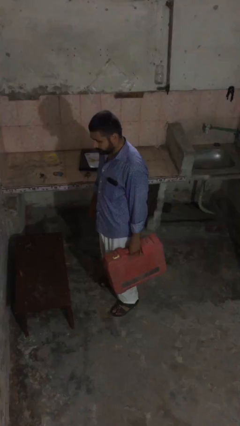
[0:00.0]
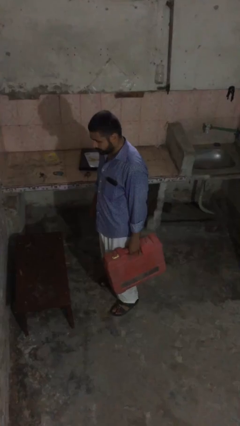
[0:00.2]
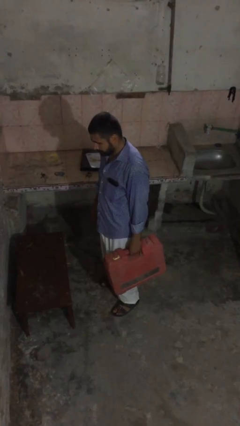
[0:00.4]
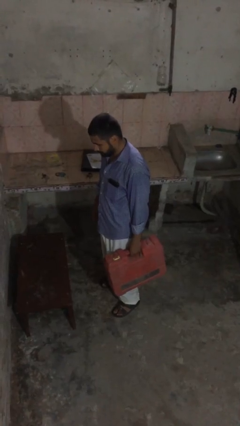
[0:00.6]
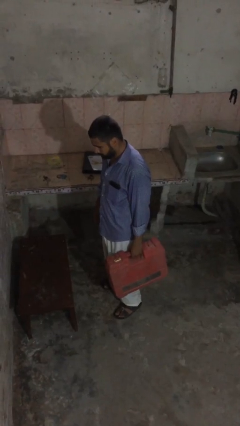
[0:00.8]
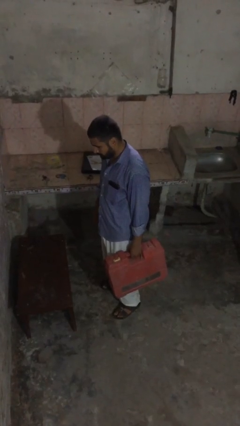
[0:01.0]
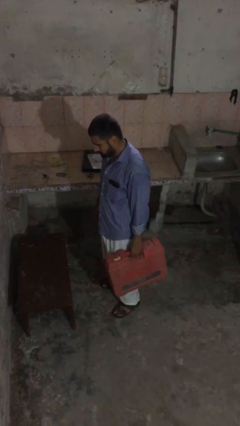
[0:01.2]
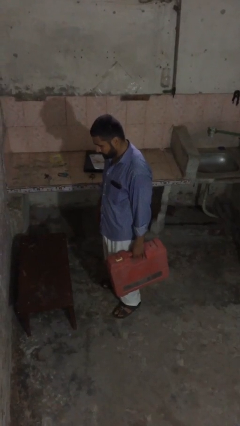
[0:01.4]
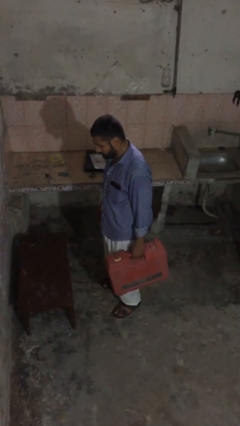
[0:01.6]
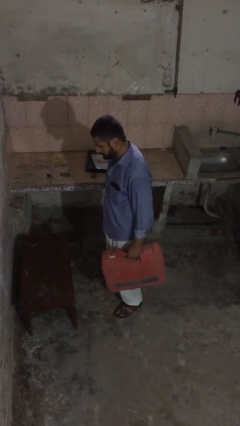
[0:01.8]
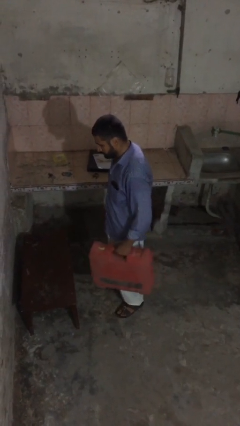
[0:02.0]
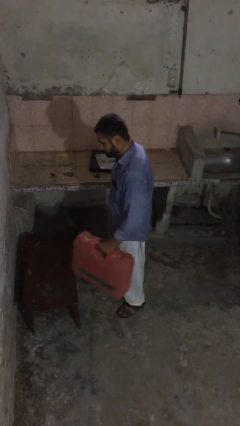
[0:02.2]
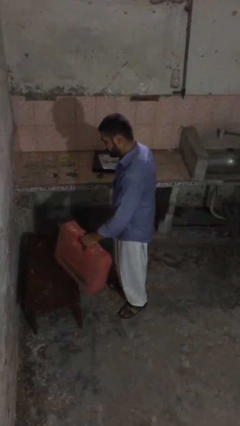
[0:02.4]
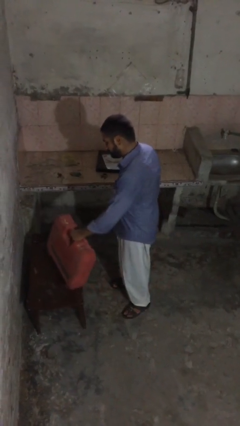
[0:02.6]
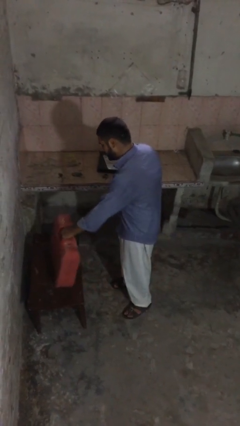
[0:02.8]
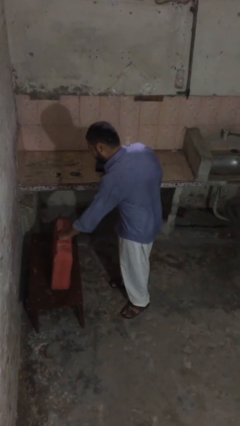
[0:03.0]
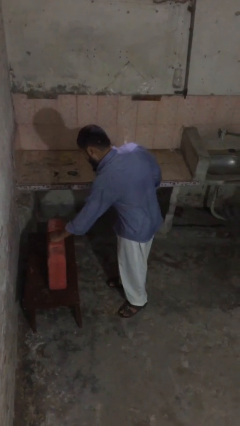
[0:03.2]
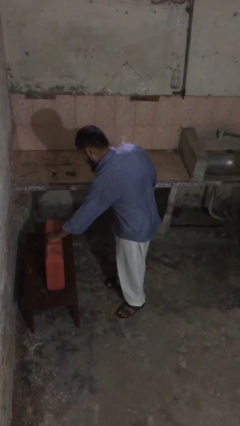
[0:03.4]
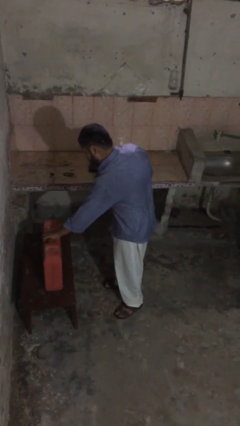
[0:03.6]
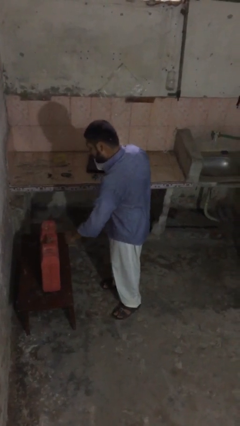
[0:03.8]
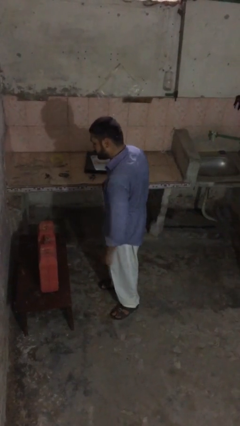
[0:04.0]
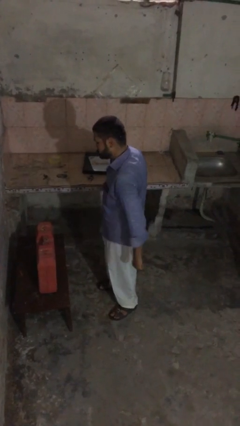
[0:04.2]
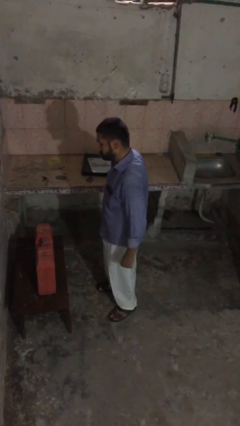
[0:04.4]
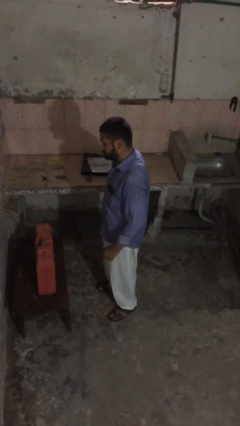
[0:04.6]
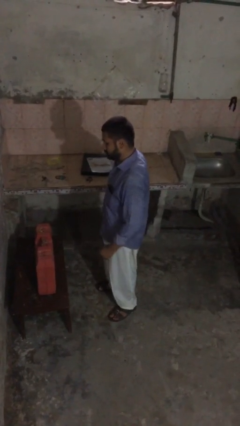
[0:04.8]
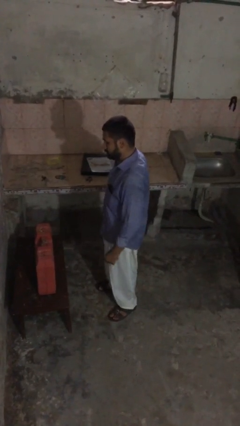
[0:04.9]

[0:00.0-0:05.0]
person puts down object on table

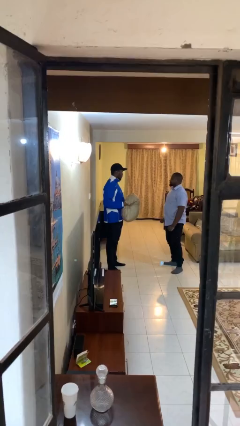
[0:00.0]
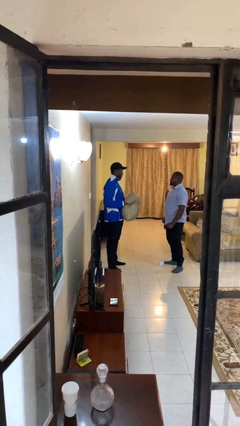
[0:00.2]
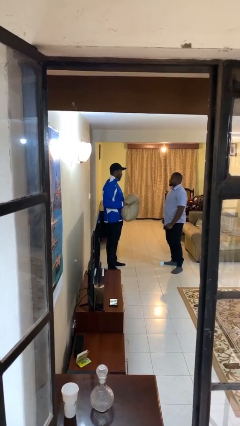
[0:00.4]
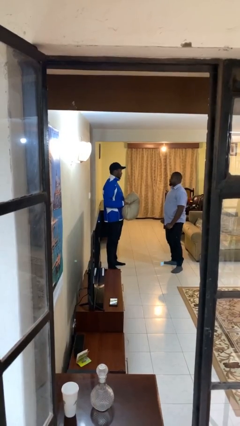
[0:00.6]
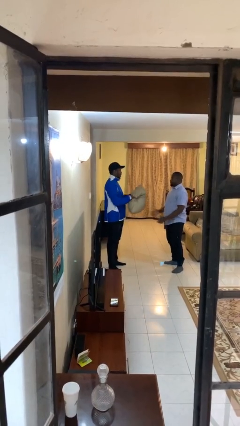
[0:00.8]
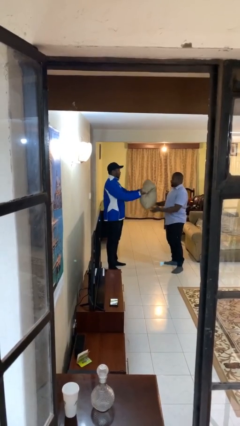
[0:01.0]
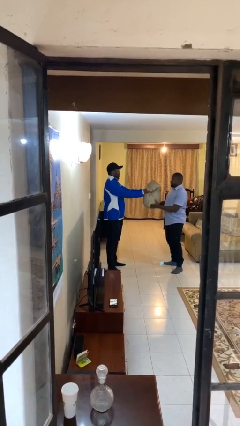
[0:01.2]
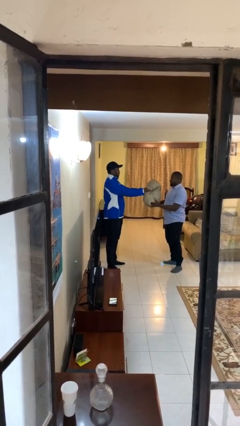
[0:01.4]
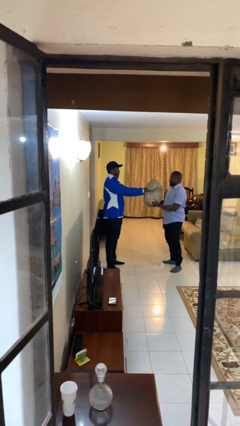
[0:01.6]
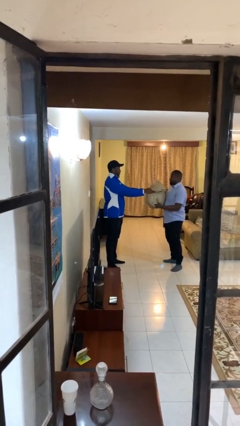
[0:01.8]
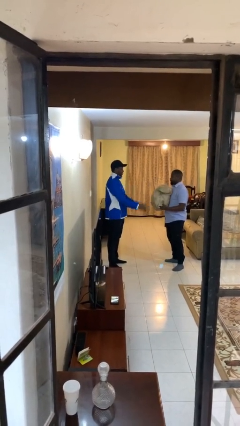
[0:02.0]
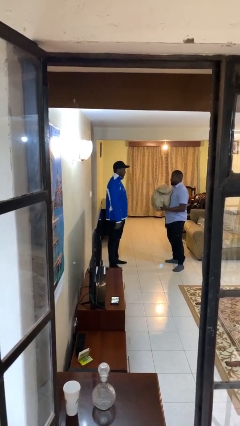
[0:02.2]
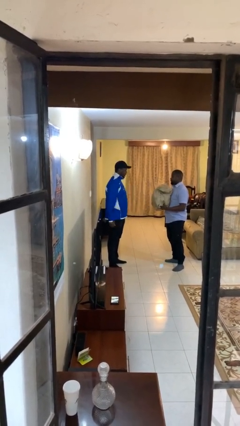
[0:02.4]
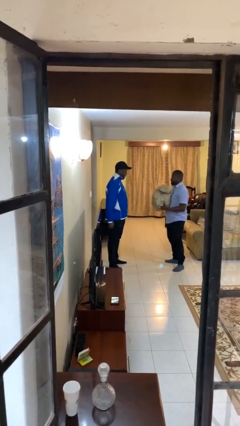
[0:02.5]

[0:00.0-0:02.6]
person transfers object to person

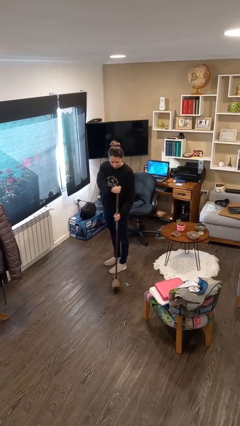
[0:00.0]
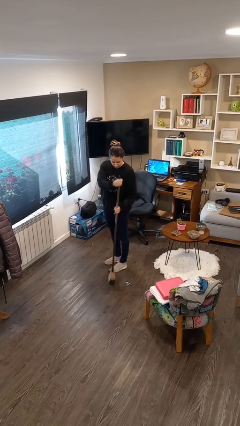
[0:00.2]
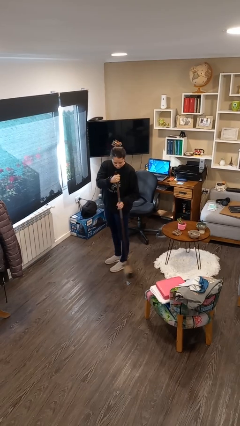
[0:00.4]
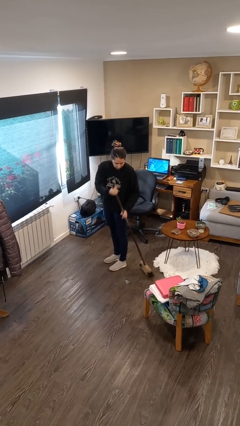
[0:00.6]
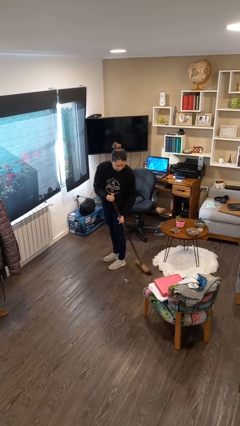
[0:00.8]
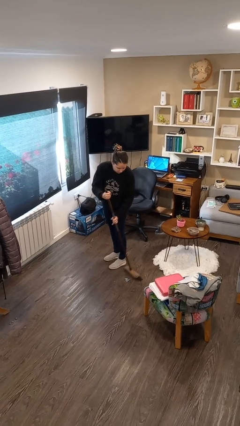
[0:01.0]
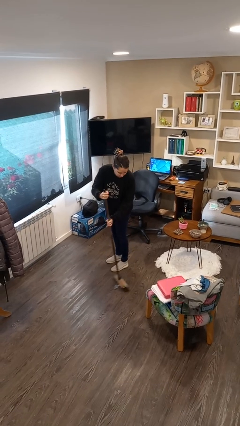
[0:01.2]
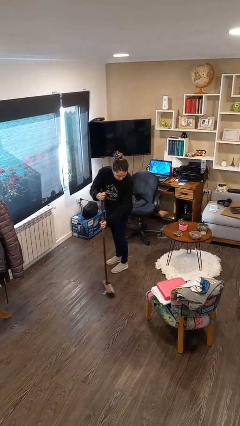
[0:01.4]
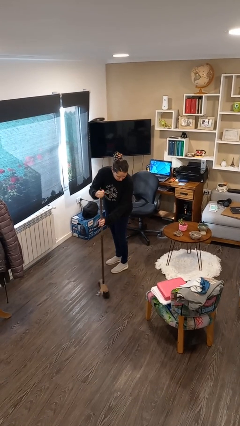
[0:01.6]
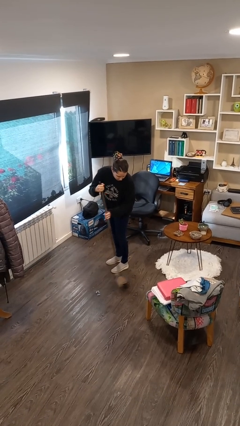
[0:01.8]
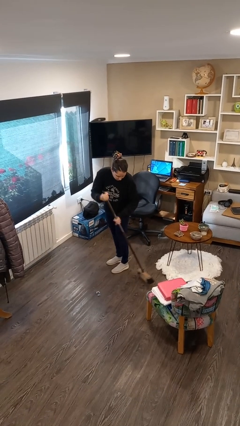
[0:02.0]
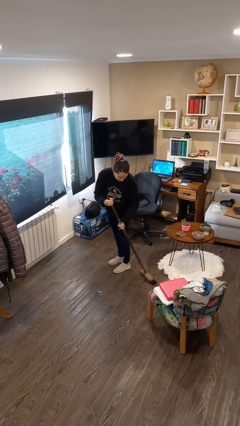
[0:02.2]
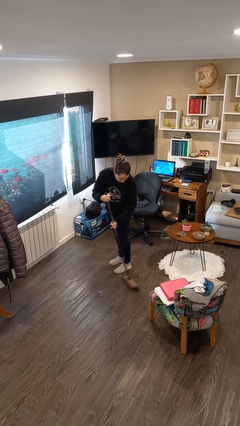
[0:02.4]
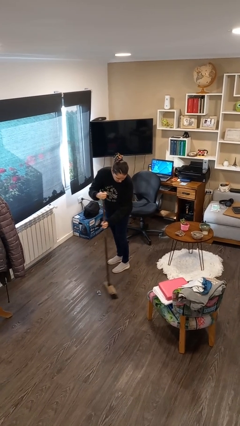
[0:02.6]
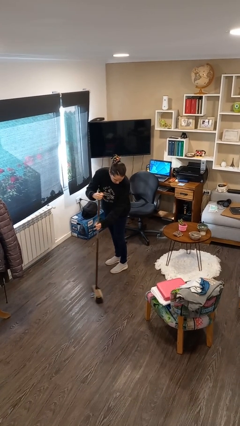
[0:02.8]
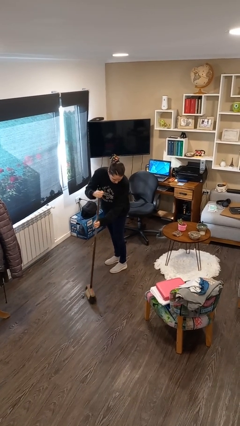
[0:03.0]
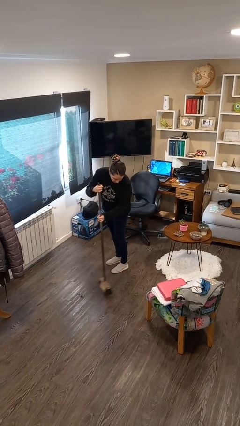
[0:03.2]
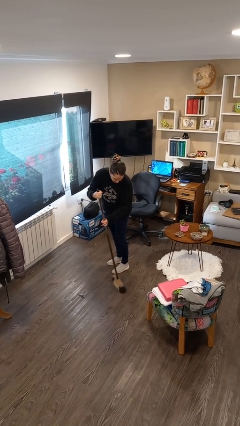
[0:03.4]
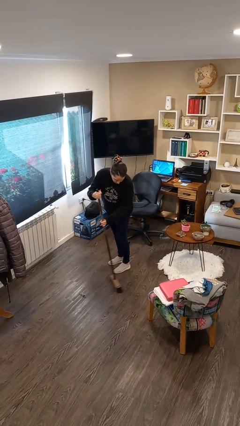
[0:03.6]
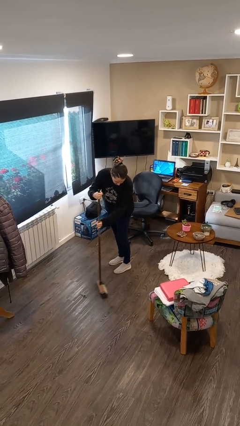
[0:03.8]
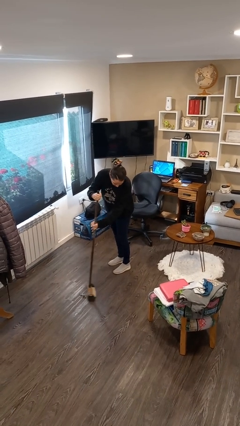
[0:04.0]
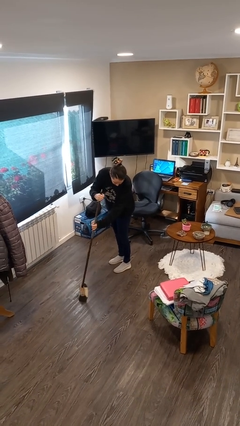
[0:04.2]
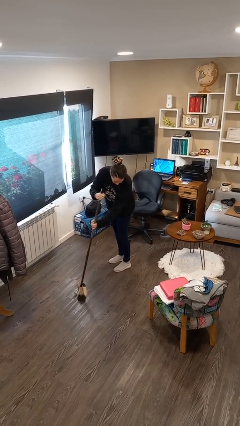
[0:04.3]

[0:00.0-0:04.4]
person sweeps floor

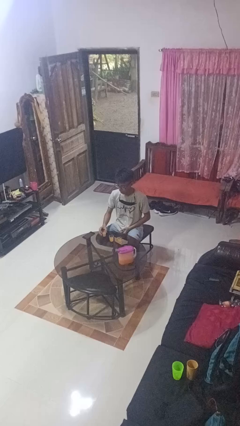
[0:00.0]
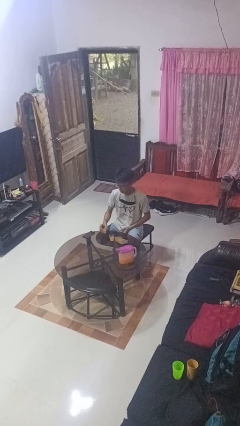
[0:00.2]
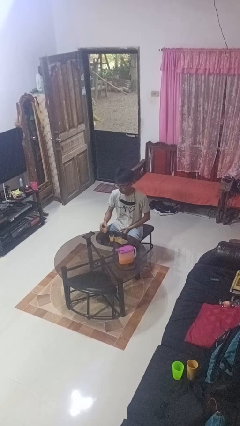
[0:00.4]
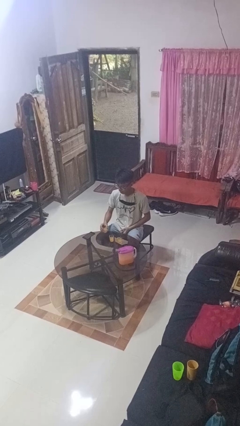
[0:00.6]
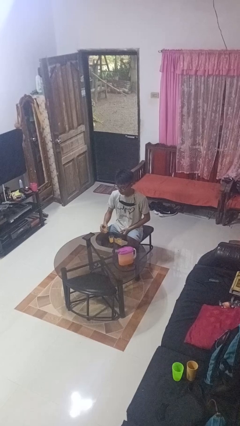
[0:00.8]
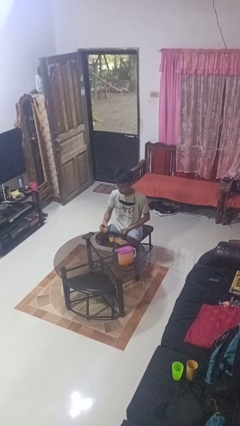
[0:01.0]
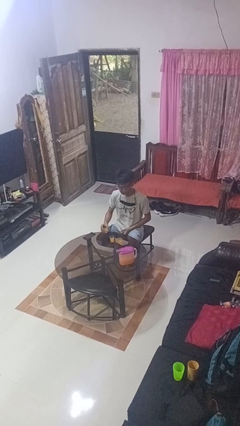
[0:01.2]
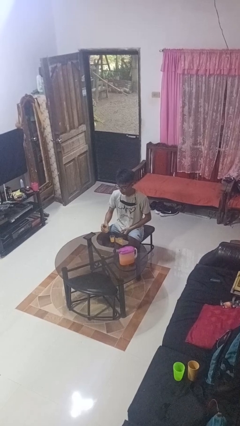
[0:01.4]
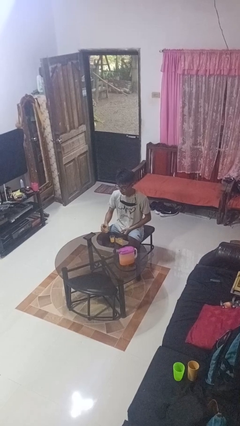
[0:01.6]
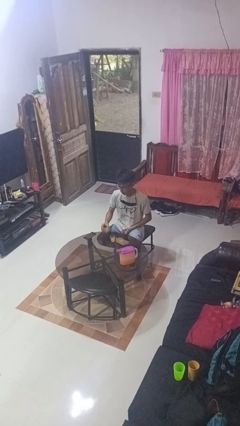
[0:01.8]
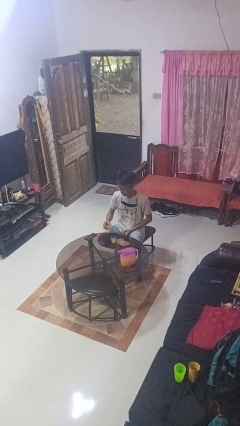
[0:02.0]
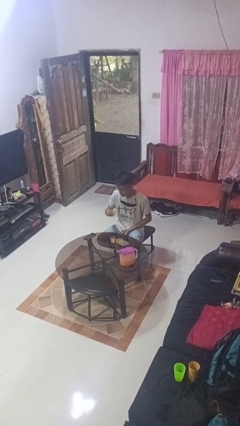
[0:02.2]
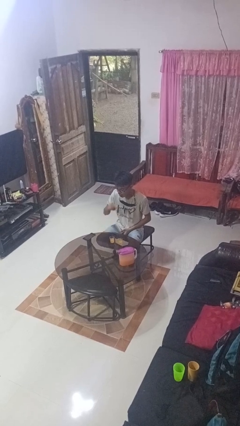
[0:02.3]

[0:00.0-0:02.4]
person picks up object from table

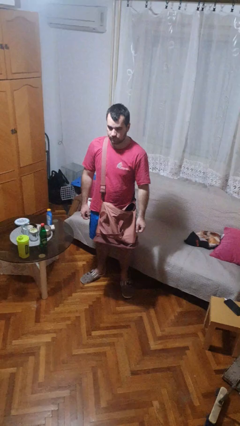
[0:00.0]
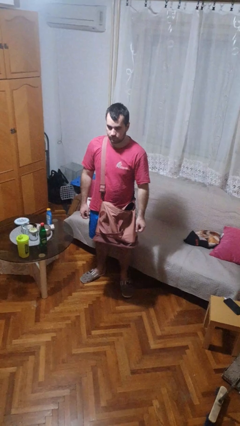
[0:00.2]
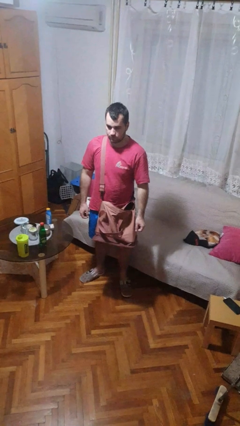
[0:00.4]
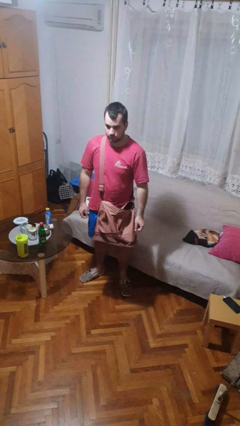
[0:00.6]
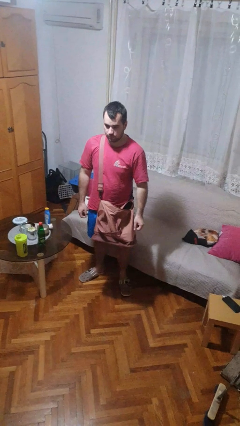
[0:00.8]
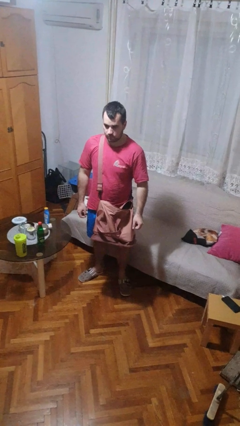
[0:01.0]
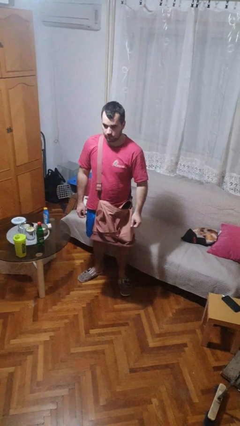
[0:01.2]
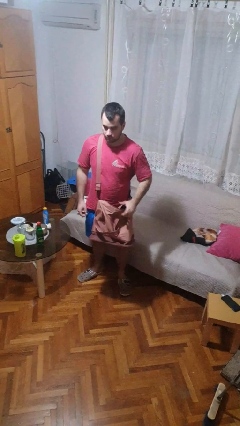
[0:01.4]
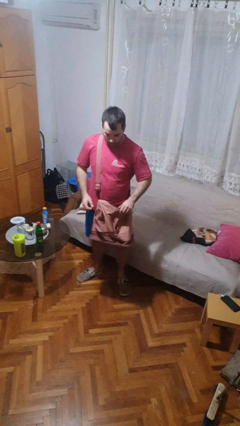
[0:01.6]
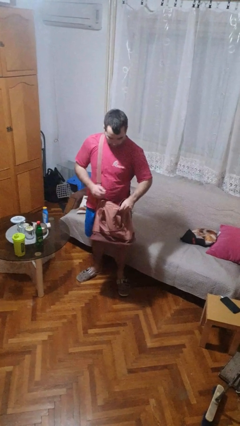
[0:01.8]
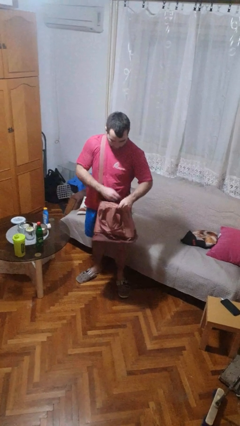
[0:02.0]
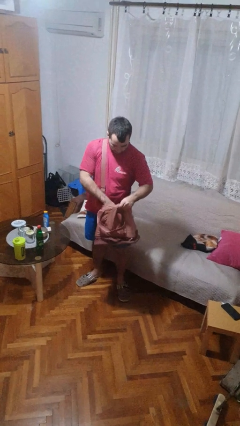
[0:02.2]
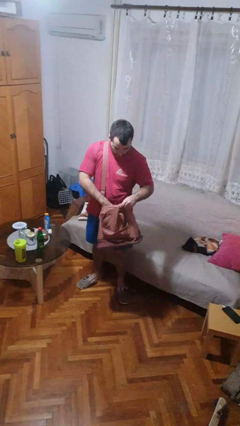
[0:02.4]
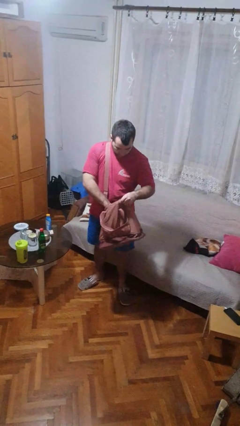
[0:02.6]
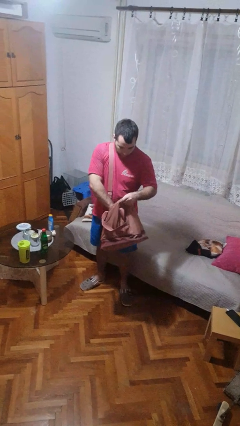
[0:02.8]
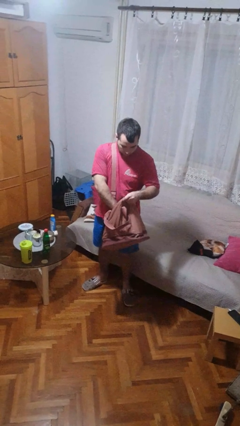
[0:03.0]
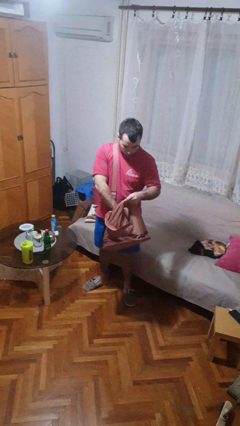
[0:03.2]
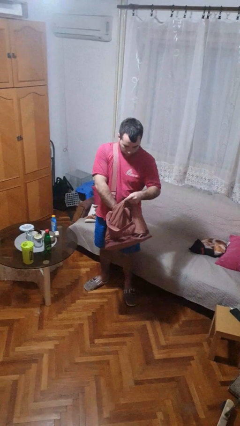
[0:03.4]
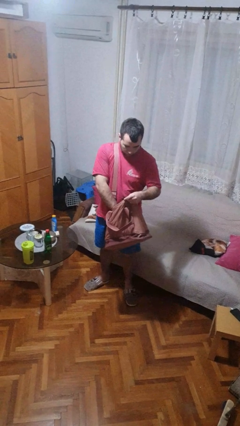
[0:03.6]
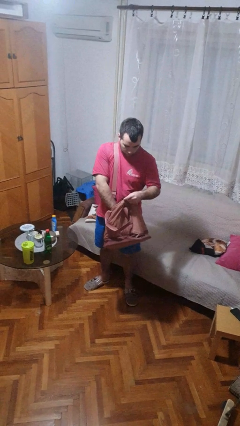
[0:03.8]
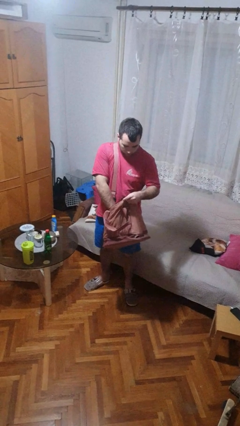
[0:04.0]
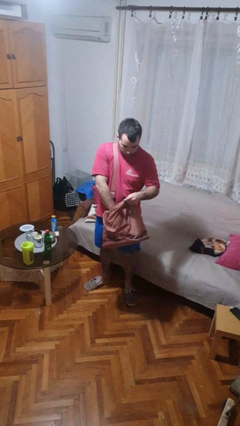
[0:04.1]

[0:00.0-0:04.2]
person searches in purse
